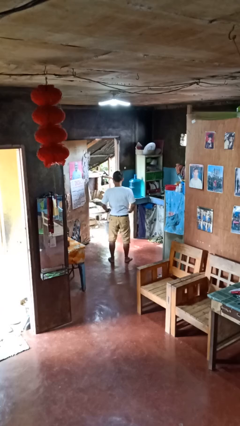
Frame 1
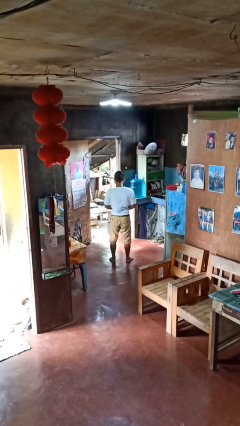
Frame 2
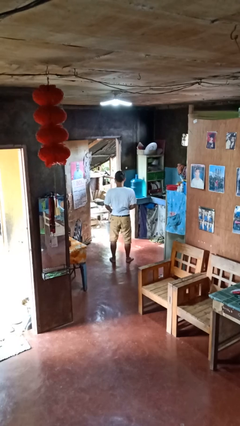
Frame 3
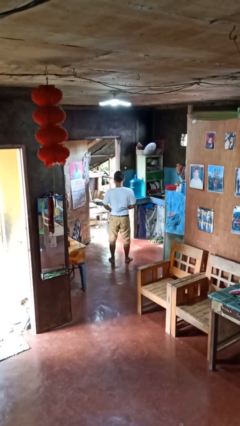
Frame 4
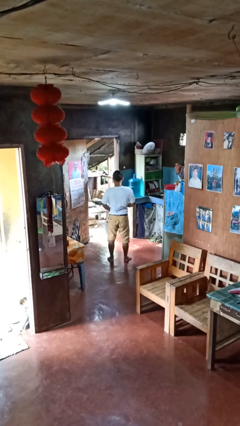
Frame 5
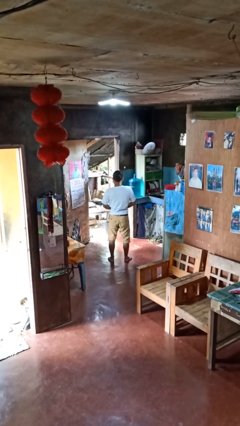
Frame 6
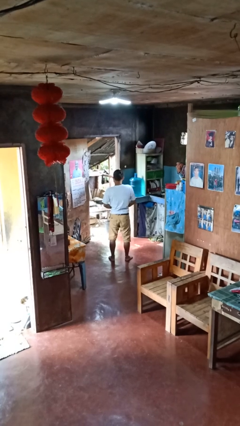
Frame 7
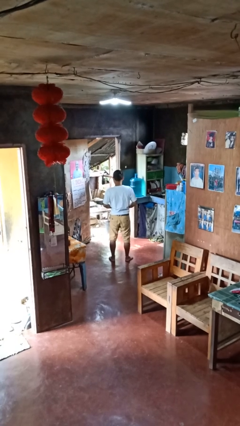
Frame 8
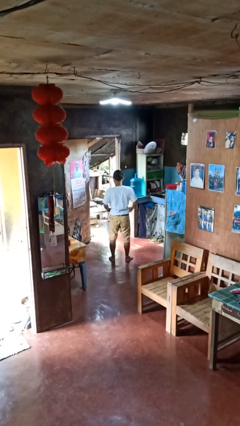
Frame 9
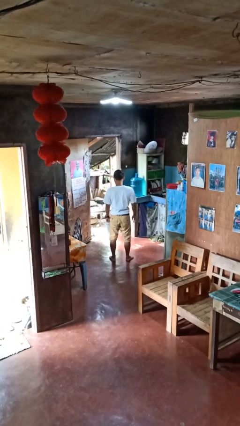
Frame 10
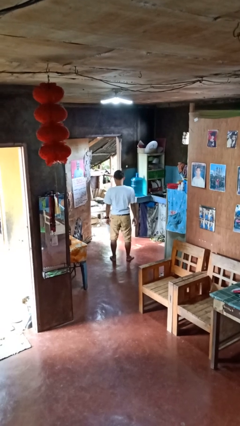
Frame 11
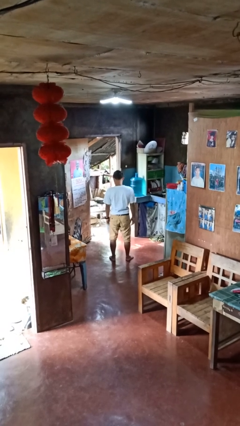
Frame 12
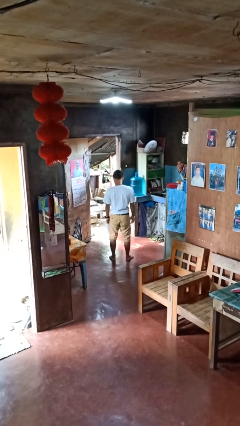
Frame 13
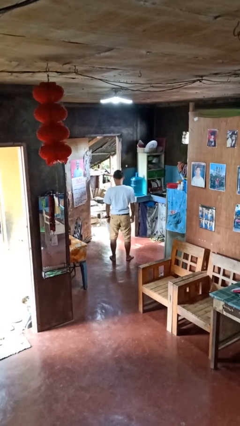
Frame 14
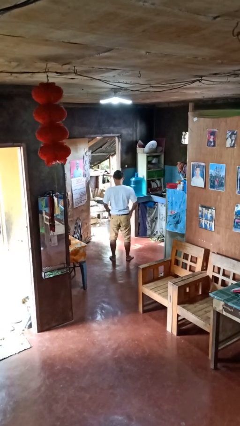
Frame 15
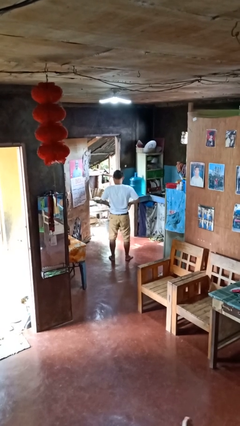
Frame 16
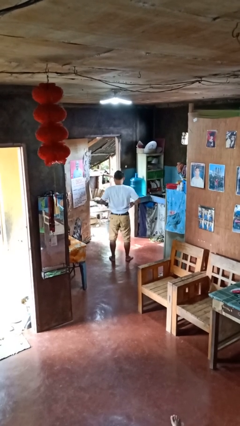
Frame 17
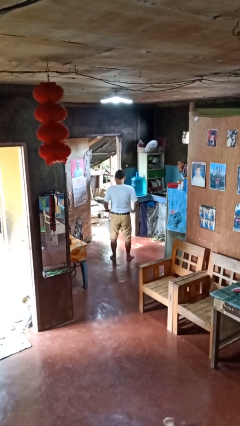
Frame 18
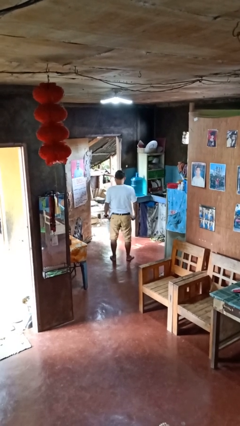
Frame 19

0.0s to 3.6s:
person tucks in shirt

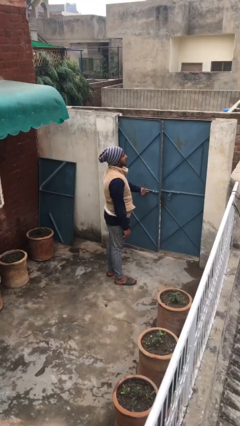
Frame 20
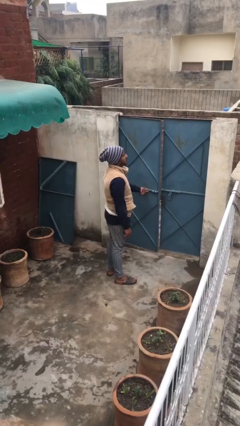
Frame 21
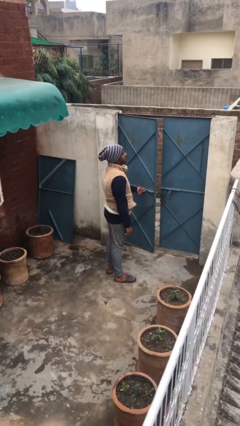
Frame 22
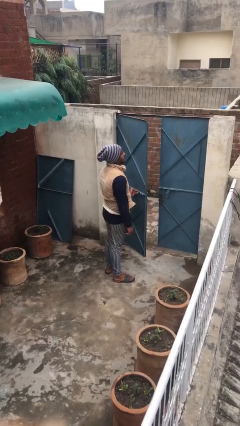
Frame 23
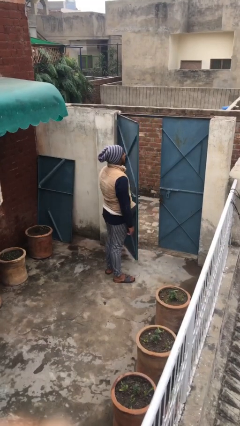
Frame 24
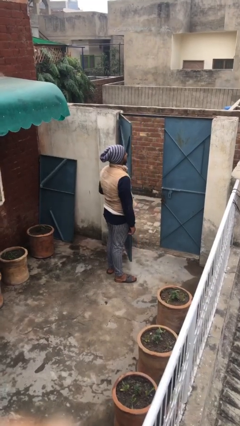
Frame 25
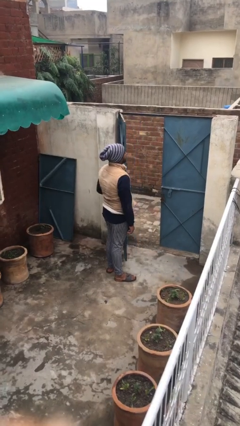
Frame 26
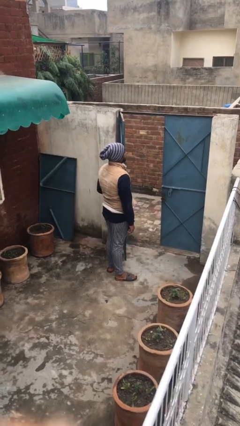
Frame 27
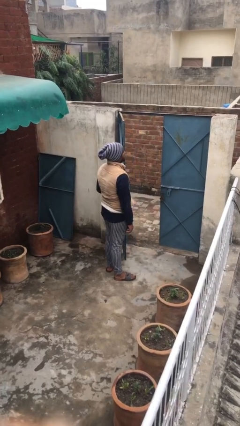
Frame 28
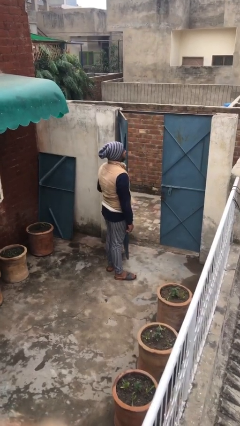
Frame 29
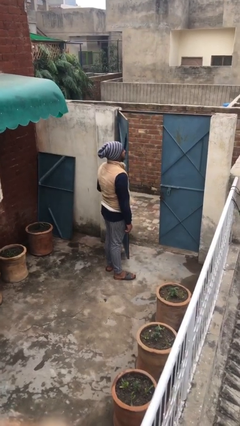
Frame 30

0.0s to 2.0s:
person opens facility door

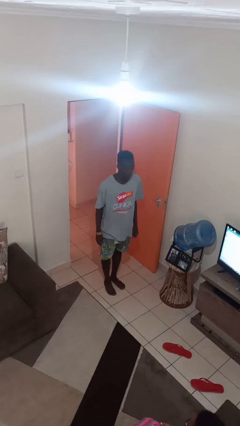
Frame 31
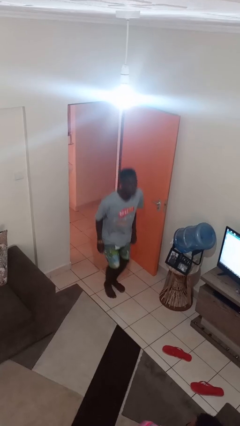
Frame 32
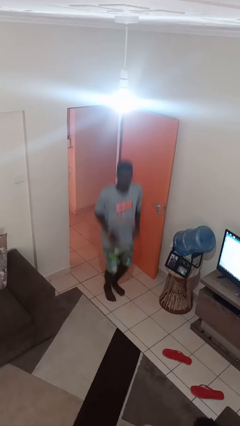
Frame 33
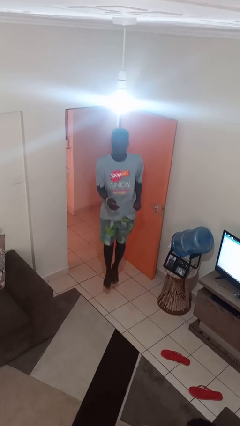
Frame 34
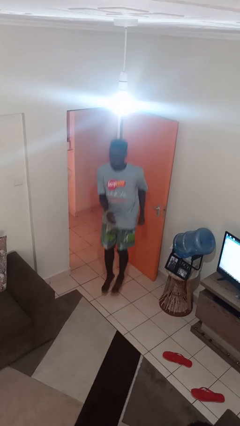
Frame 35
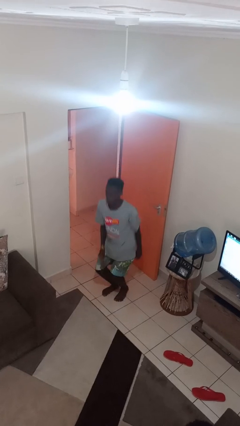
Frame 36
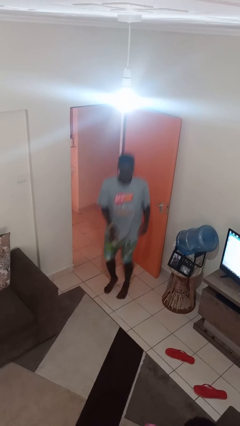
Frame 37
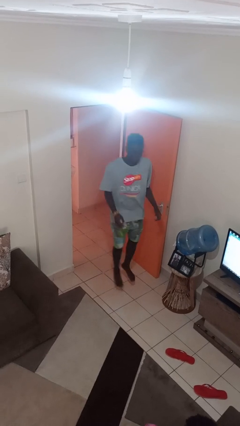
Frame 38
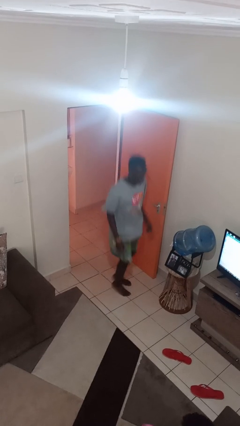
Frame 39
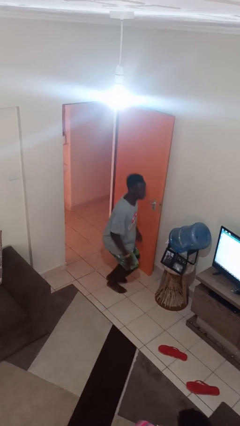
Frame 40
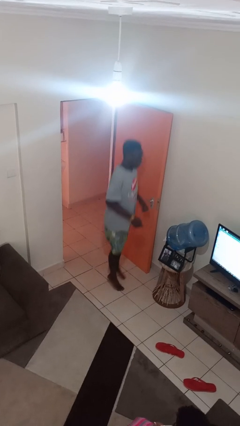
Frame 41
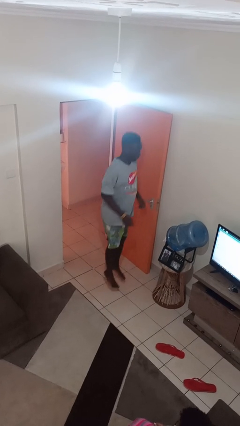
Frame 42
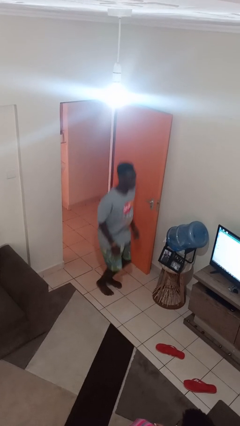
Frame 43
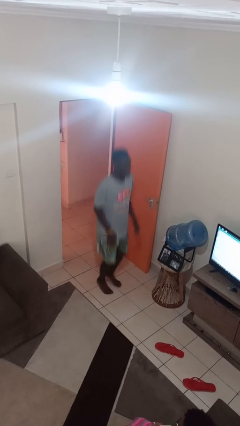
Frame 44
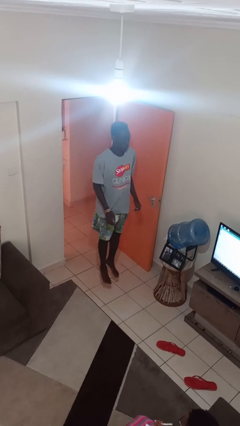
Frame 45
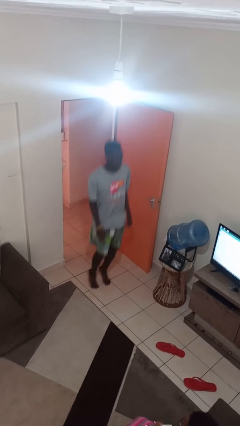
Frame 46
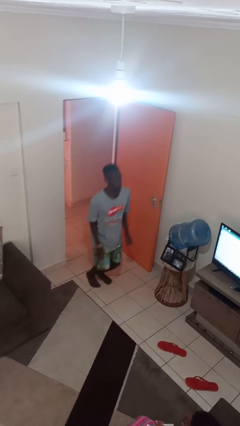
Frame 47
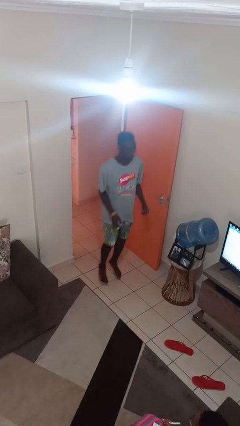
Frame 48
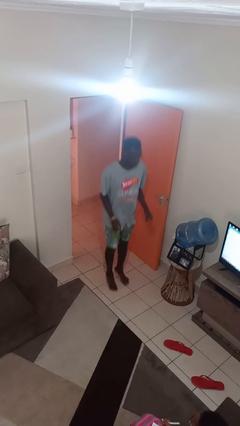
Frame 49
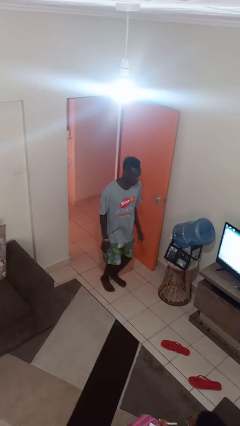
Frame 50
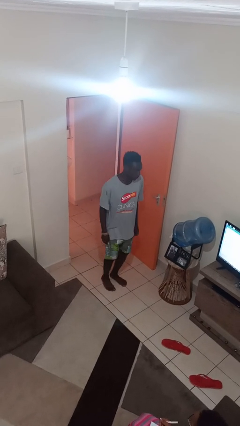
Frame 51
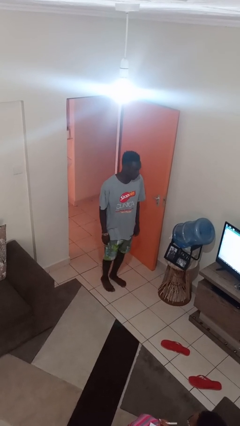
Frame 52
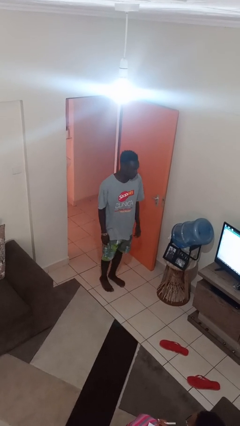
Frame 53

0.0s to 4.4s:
person jumps

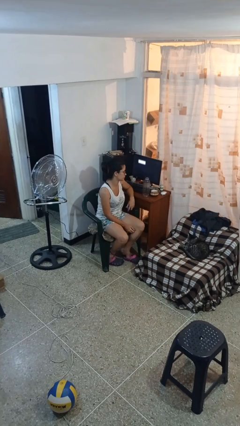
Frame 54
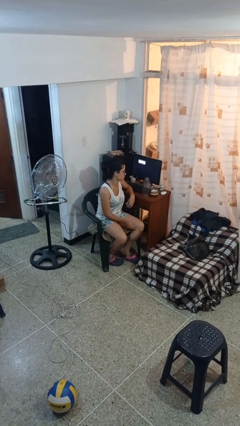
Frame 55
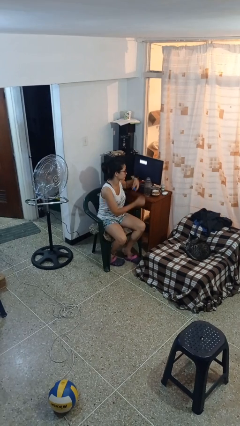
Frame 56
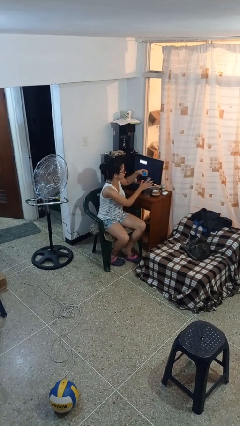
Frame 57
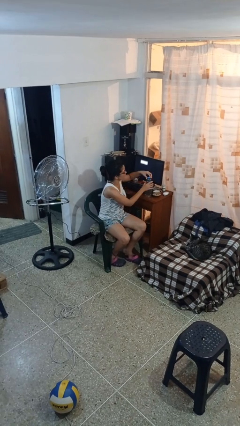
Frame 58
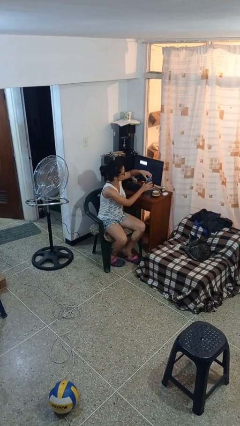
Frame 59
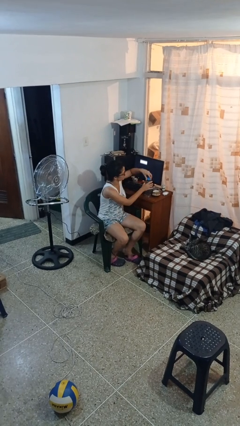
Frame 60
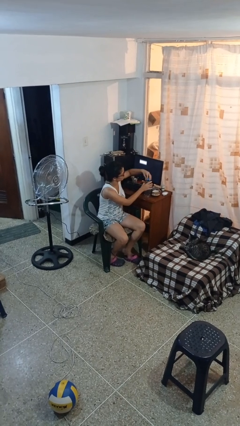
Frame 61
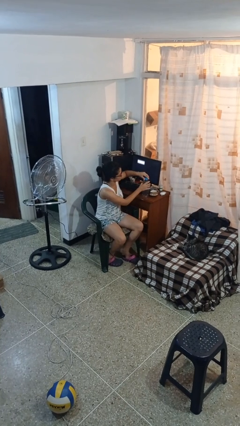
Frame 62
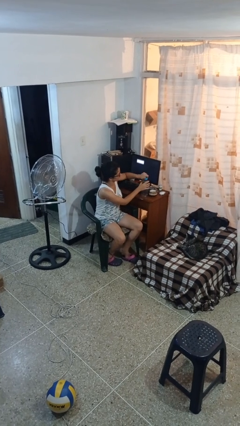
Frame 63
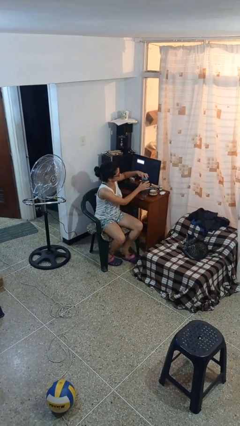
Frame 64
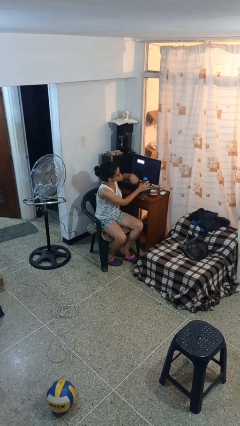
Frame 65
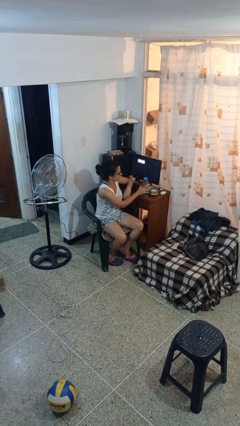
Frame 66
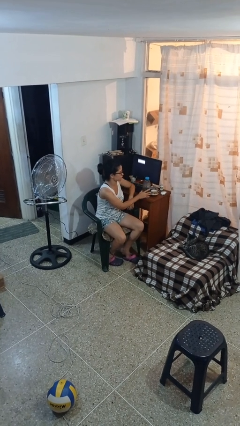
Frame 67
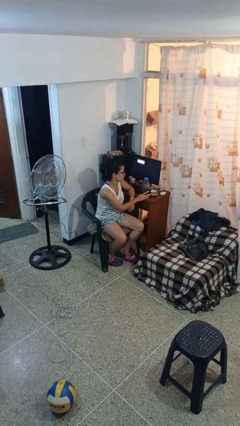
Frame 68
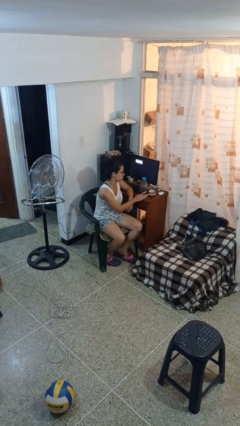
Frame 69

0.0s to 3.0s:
person screws lid to bottle

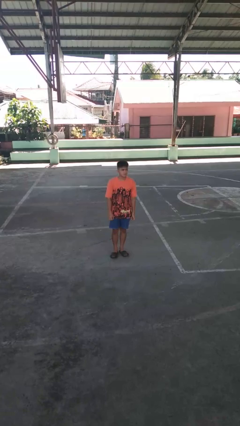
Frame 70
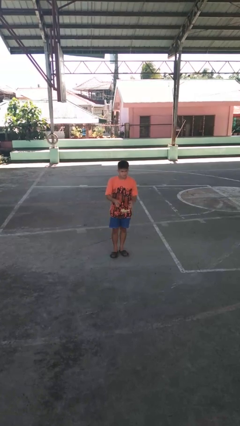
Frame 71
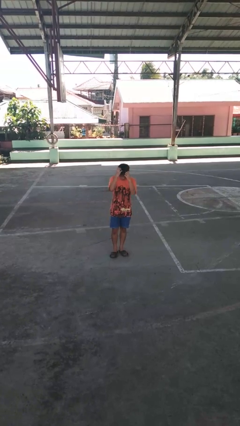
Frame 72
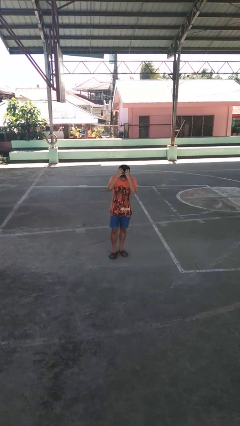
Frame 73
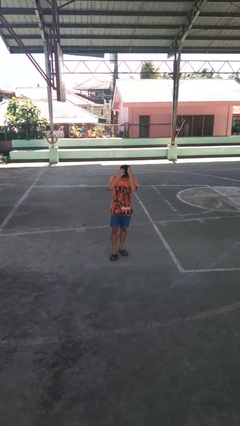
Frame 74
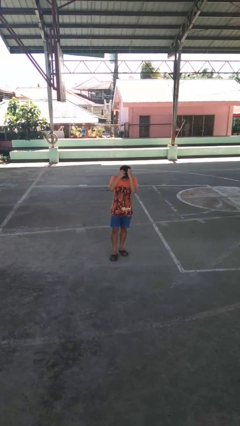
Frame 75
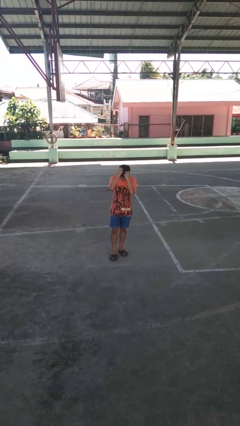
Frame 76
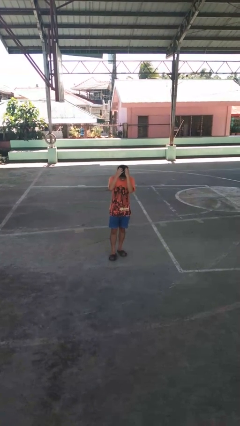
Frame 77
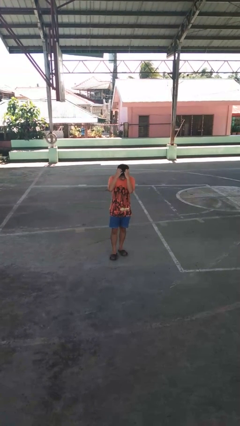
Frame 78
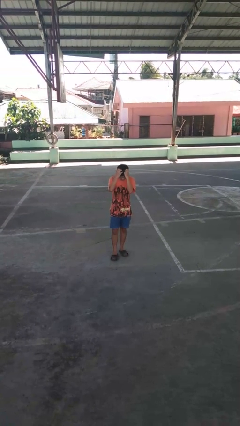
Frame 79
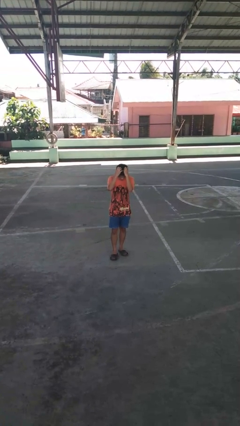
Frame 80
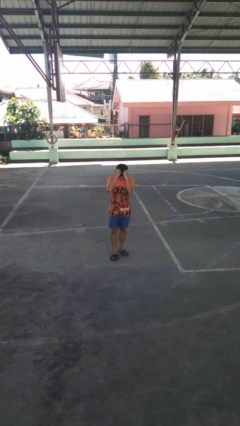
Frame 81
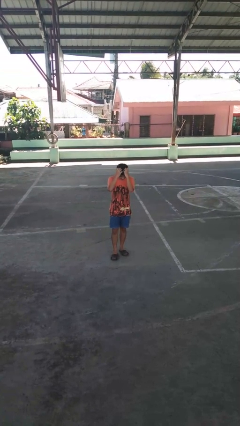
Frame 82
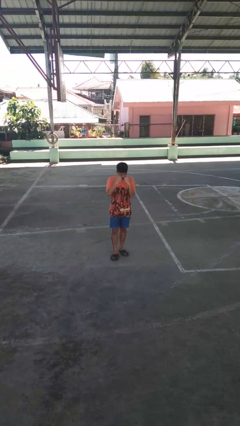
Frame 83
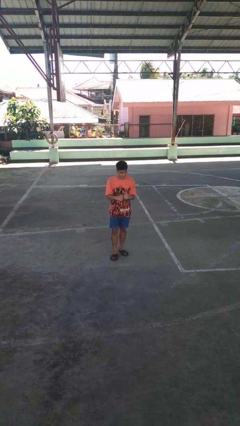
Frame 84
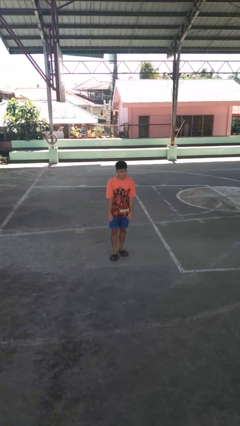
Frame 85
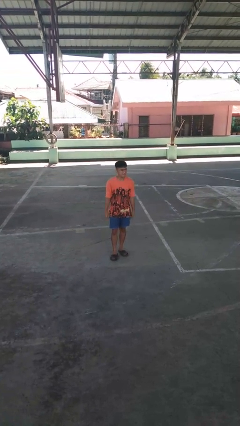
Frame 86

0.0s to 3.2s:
person scratches face

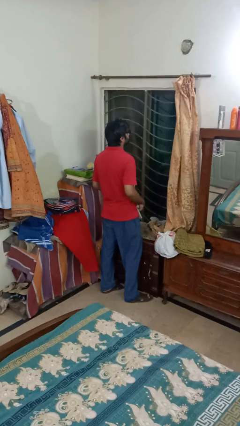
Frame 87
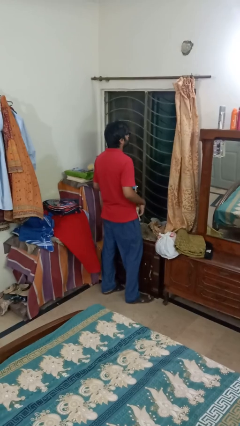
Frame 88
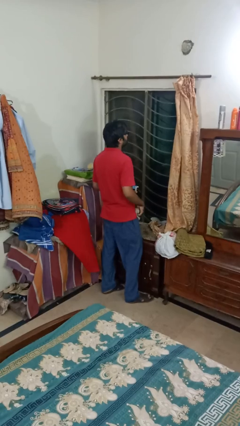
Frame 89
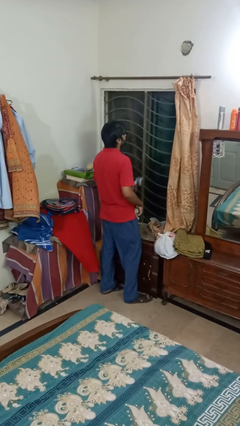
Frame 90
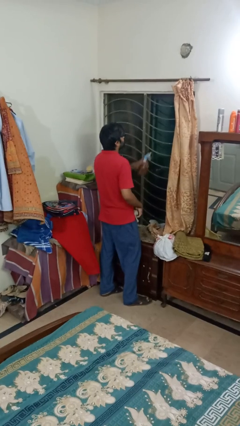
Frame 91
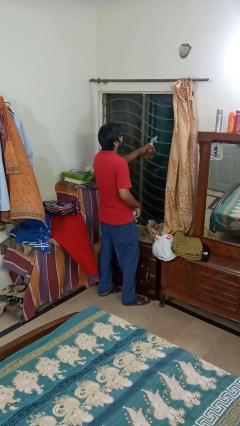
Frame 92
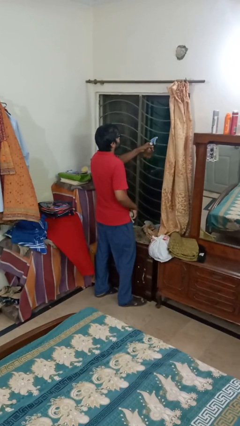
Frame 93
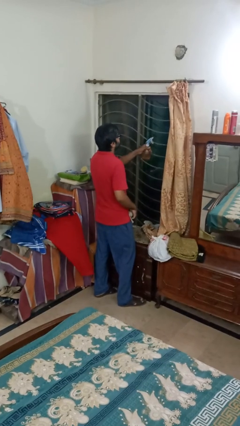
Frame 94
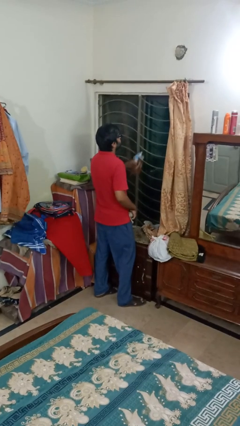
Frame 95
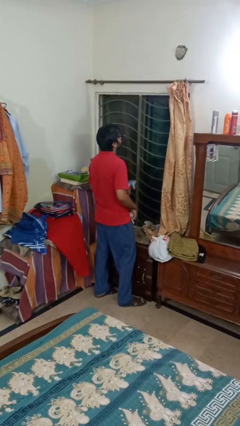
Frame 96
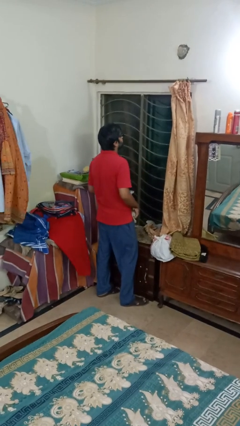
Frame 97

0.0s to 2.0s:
person sprays from bottle
